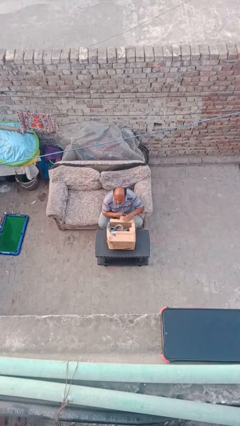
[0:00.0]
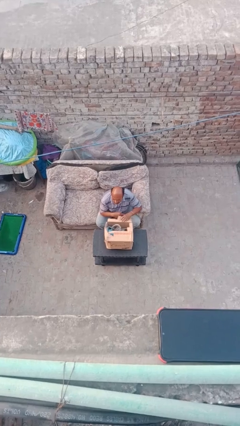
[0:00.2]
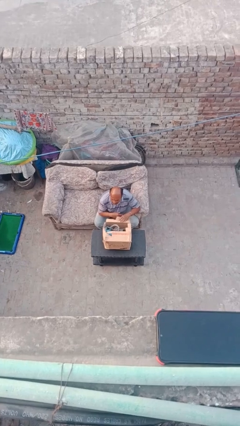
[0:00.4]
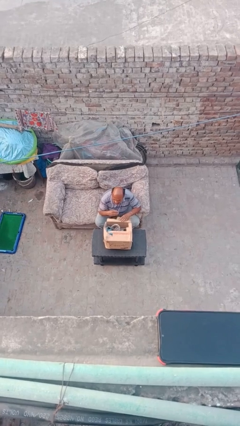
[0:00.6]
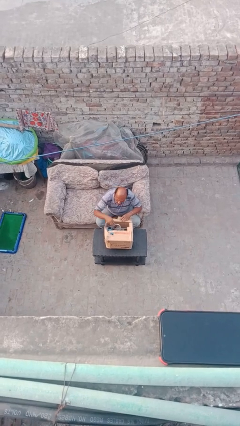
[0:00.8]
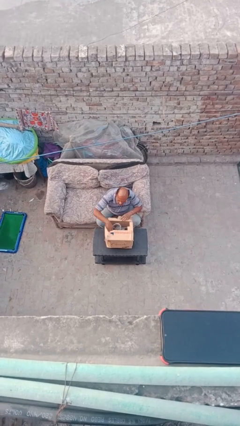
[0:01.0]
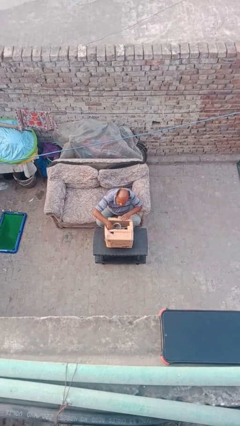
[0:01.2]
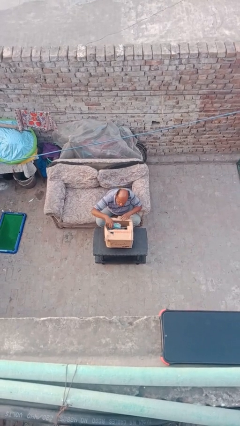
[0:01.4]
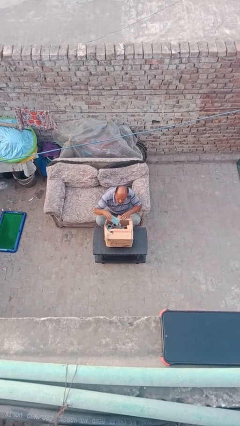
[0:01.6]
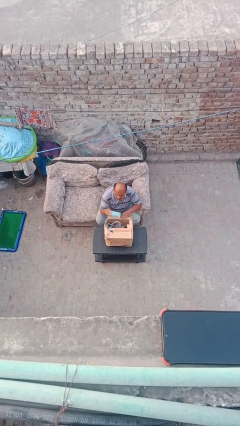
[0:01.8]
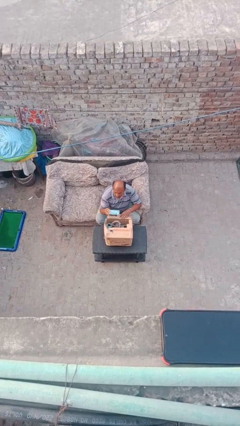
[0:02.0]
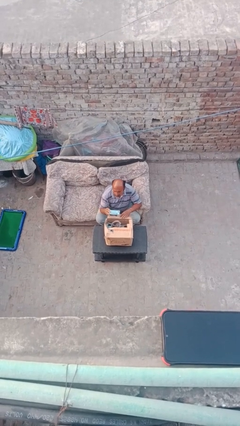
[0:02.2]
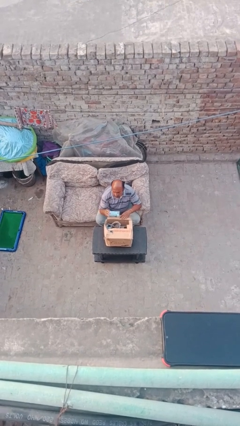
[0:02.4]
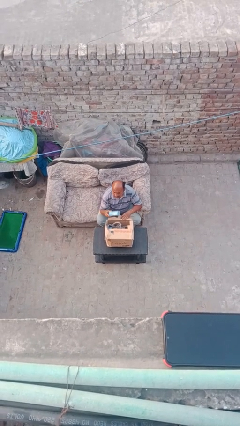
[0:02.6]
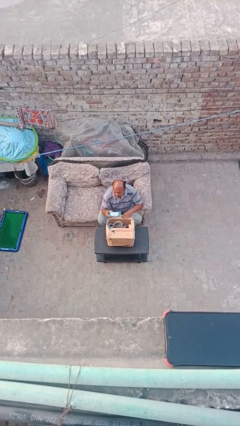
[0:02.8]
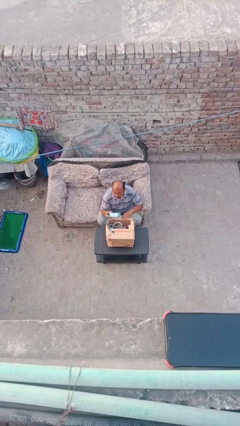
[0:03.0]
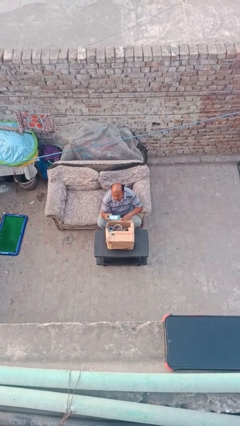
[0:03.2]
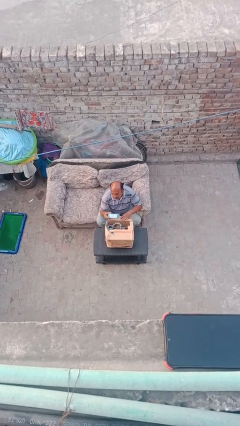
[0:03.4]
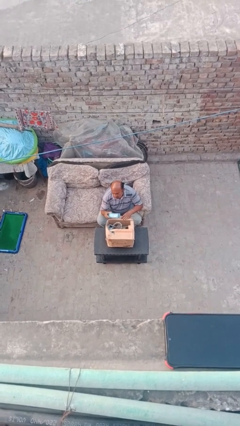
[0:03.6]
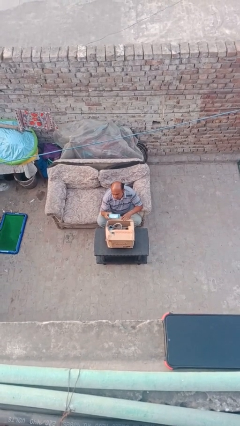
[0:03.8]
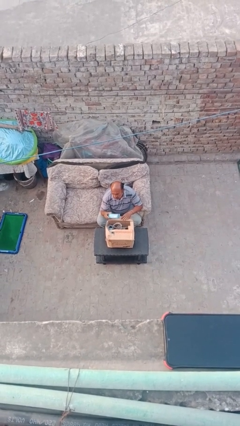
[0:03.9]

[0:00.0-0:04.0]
person takes object from box

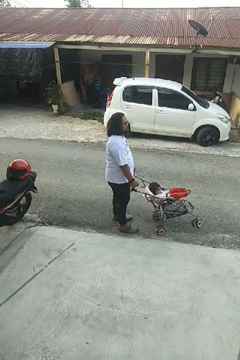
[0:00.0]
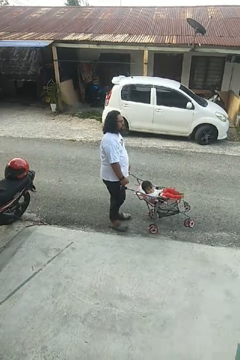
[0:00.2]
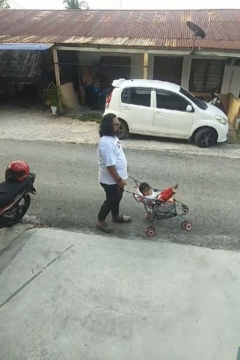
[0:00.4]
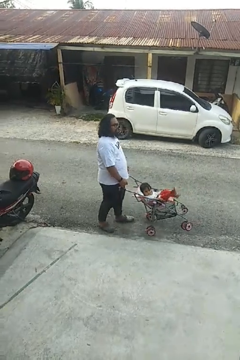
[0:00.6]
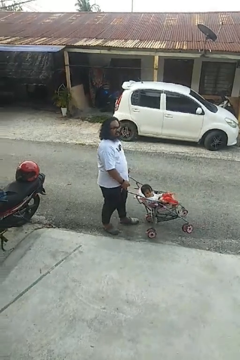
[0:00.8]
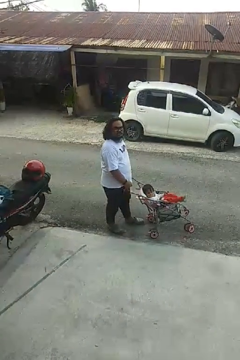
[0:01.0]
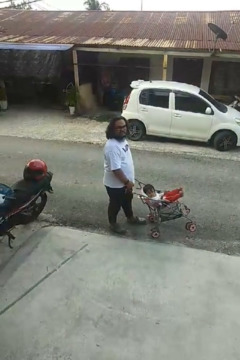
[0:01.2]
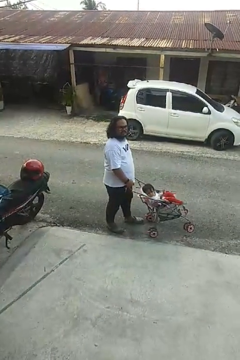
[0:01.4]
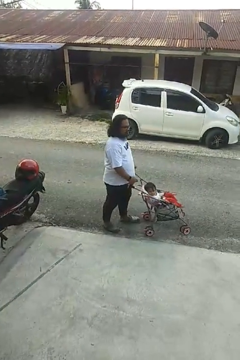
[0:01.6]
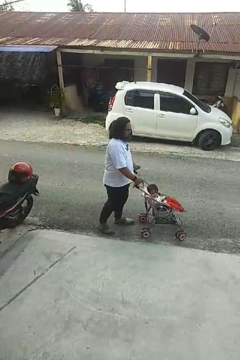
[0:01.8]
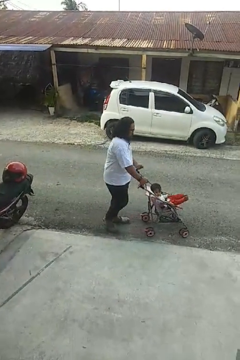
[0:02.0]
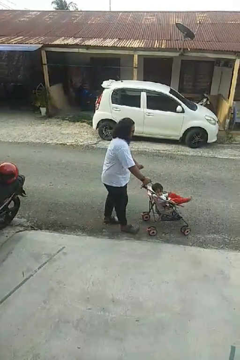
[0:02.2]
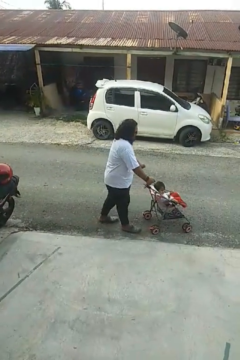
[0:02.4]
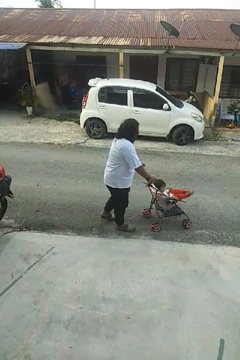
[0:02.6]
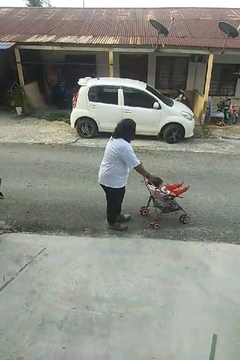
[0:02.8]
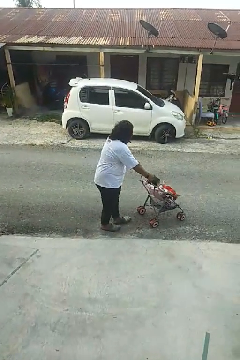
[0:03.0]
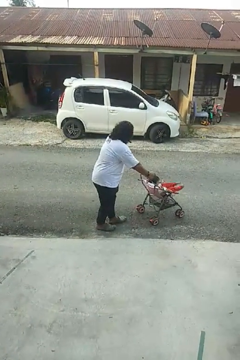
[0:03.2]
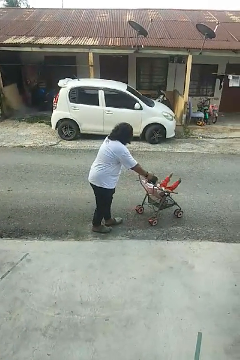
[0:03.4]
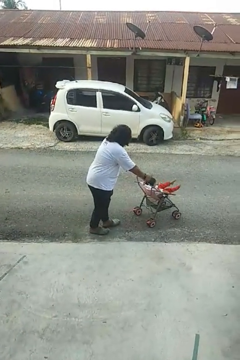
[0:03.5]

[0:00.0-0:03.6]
person pushes wheeled cart

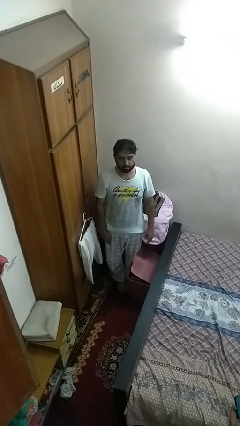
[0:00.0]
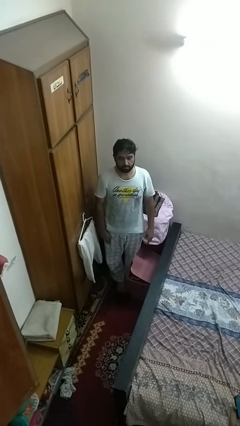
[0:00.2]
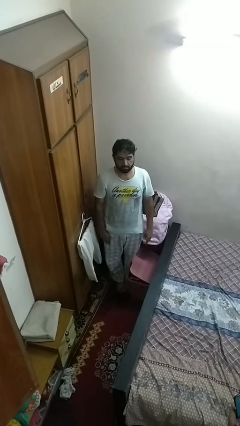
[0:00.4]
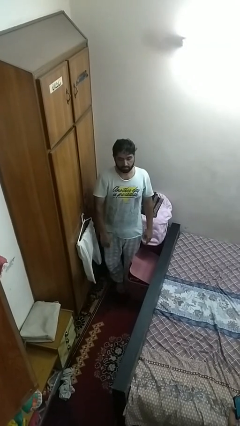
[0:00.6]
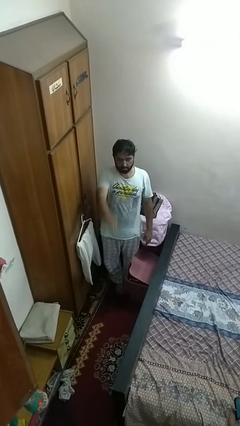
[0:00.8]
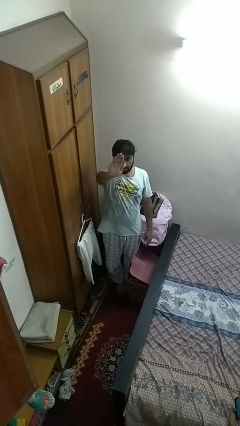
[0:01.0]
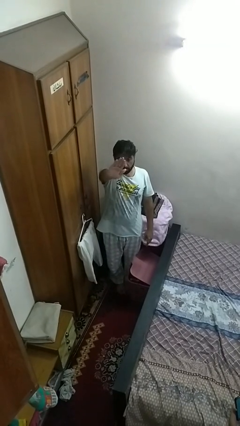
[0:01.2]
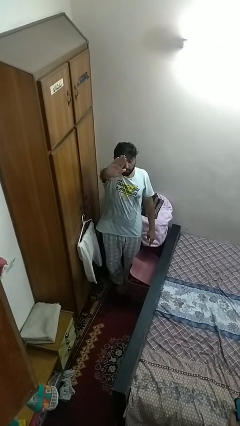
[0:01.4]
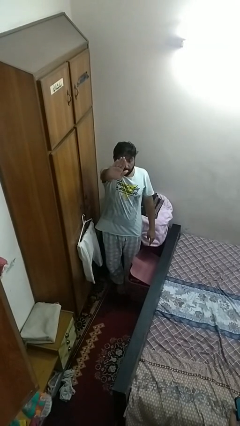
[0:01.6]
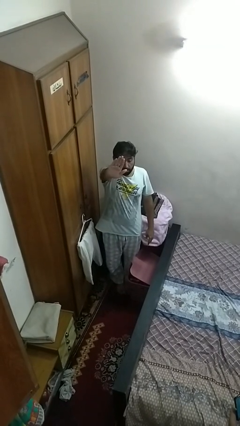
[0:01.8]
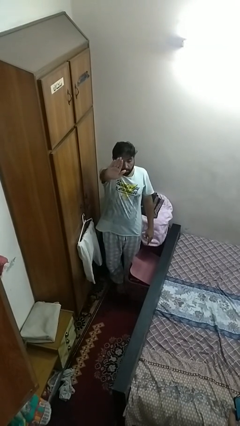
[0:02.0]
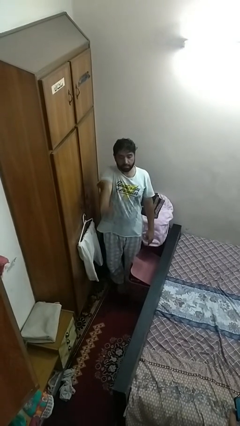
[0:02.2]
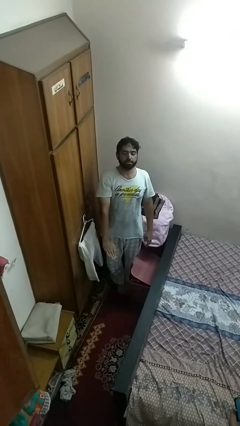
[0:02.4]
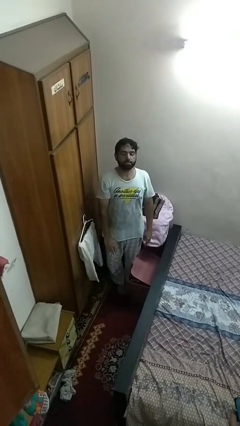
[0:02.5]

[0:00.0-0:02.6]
person gestures stop

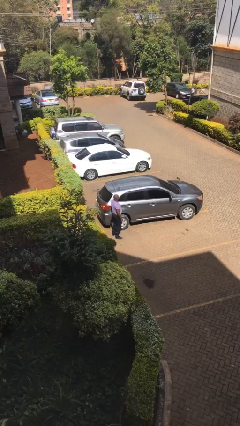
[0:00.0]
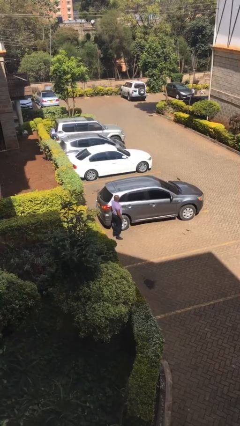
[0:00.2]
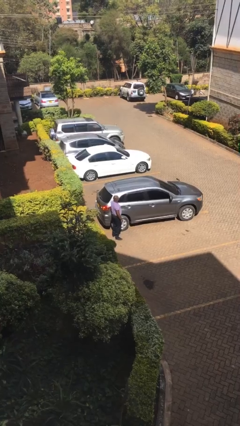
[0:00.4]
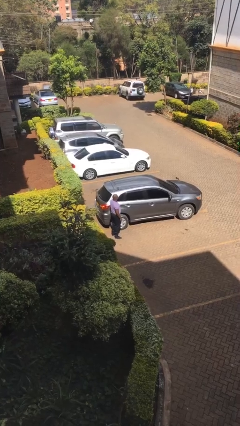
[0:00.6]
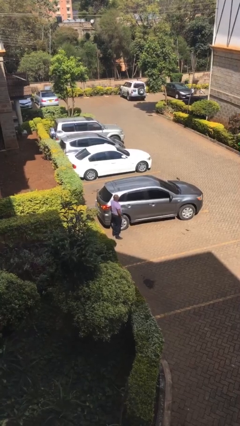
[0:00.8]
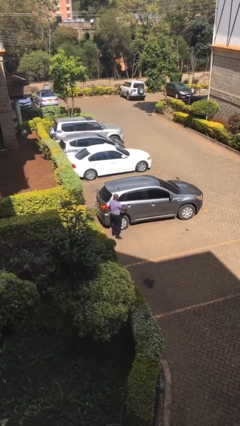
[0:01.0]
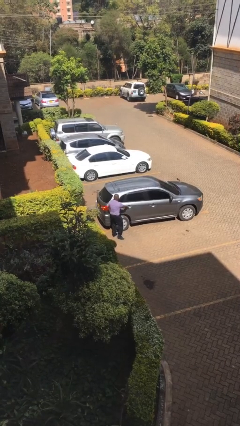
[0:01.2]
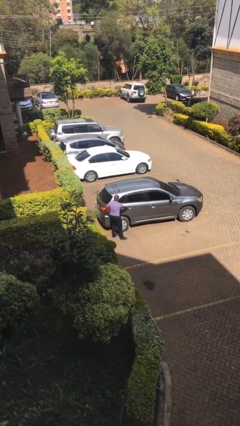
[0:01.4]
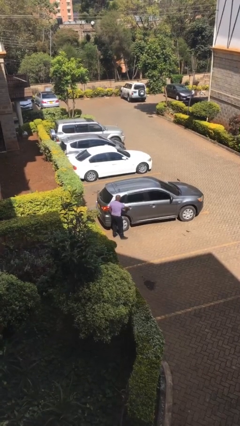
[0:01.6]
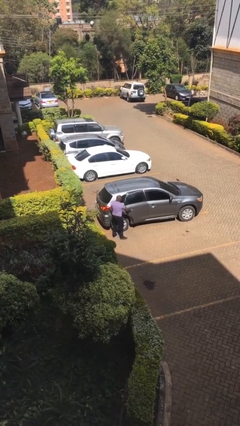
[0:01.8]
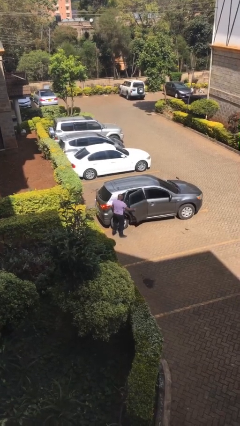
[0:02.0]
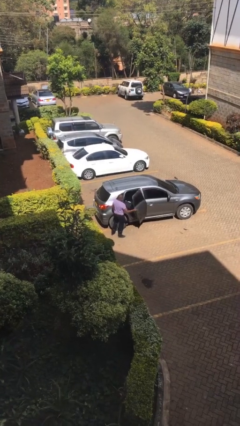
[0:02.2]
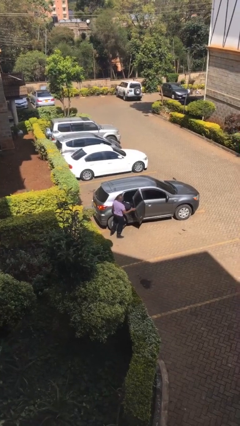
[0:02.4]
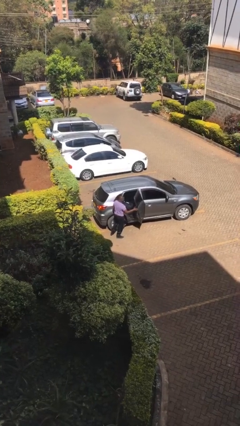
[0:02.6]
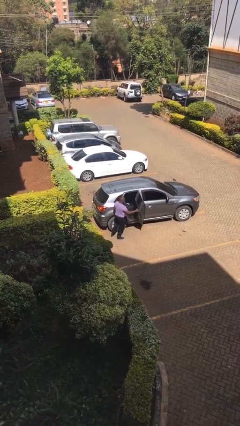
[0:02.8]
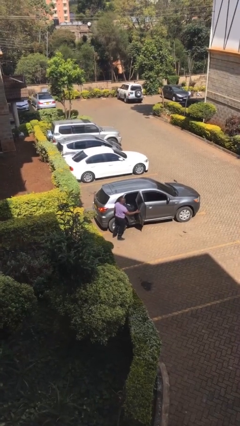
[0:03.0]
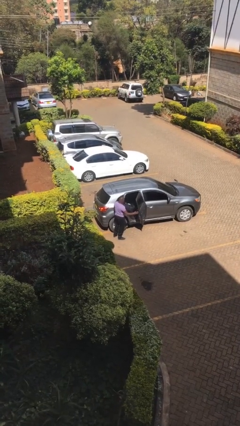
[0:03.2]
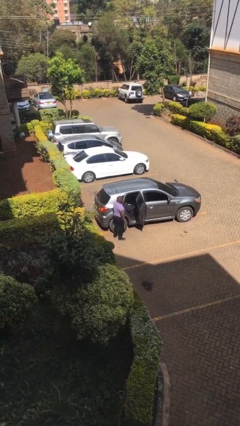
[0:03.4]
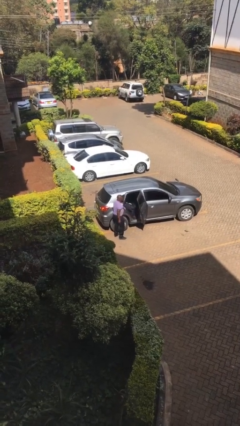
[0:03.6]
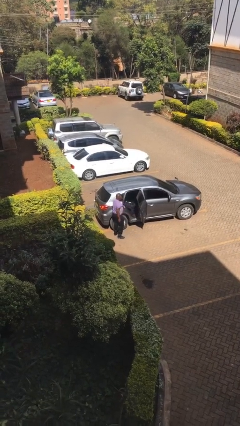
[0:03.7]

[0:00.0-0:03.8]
person opens car door

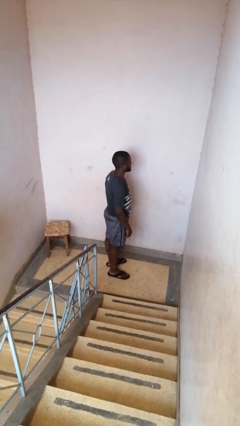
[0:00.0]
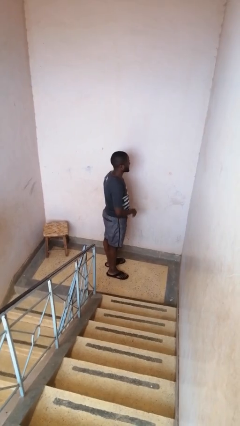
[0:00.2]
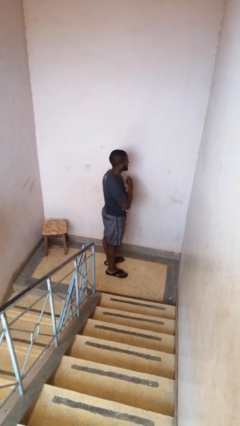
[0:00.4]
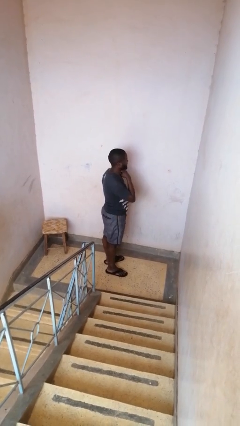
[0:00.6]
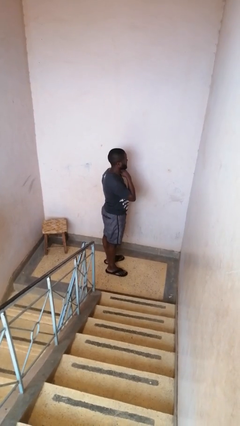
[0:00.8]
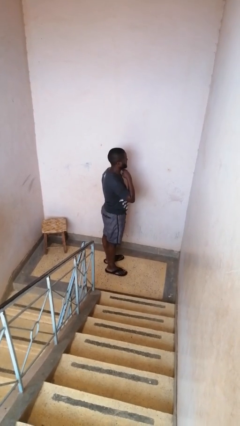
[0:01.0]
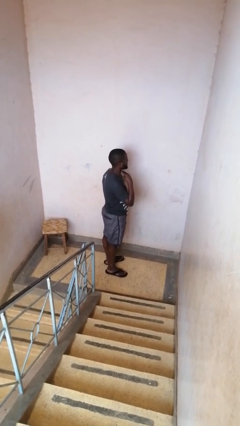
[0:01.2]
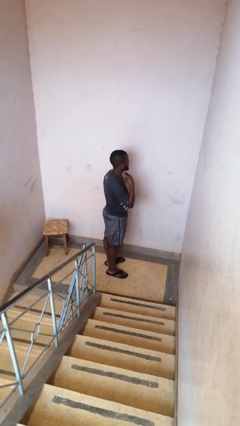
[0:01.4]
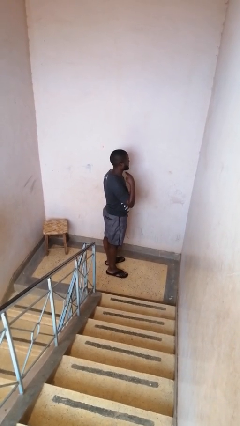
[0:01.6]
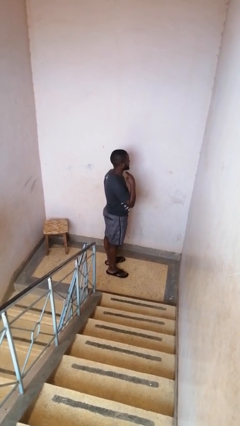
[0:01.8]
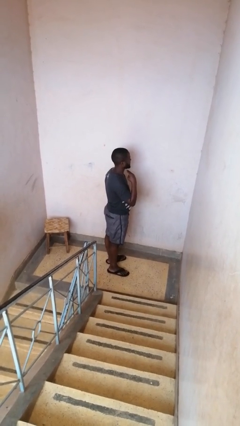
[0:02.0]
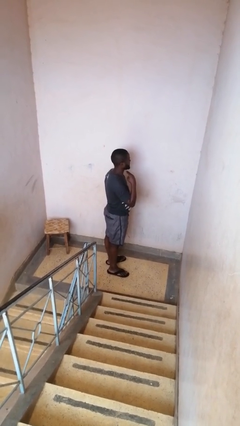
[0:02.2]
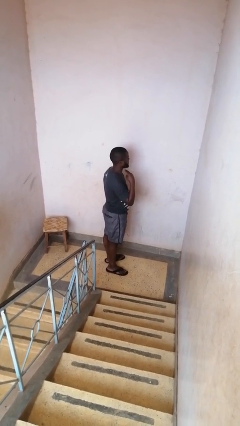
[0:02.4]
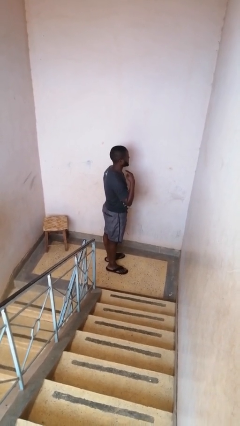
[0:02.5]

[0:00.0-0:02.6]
person gestures cut

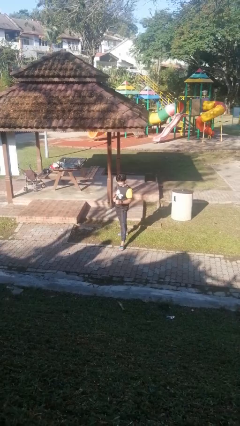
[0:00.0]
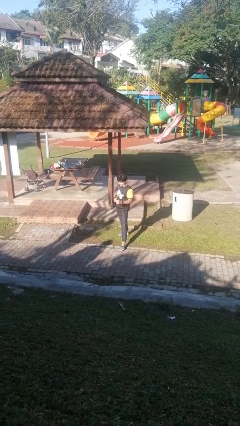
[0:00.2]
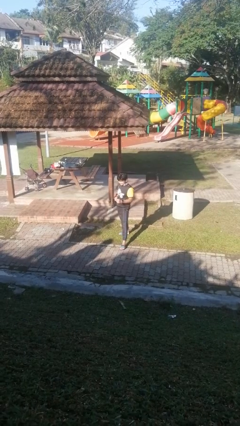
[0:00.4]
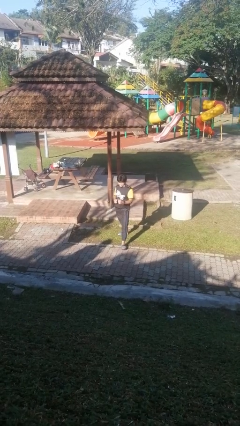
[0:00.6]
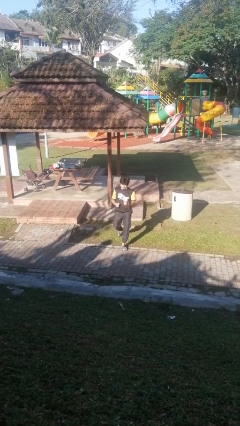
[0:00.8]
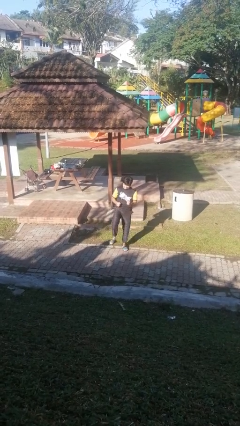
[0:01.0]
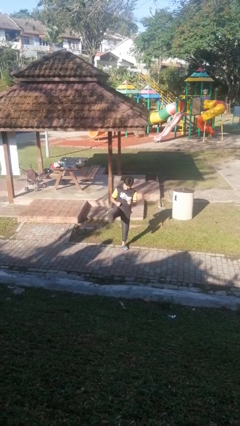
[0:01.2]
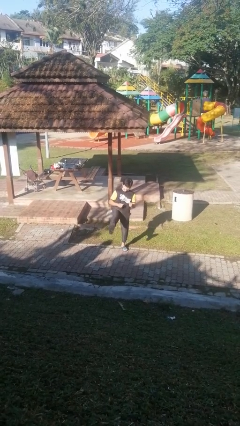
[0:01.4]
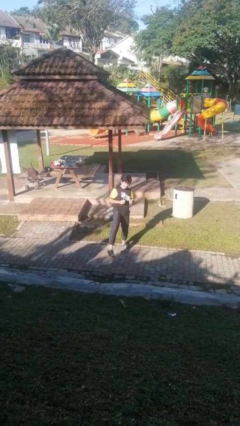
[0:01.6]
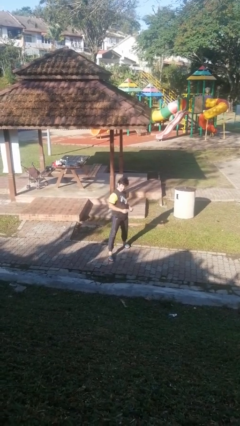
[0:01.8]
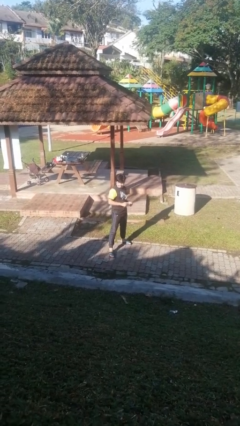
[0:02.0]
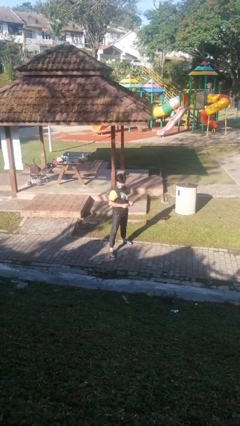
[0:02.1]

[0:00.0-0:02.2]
person karate kicks
